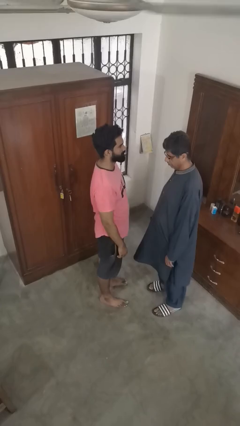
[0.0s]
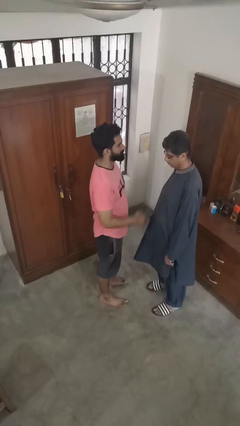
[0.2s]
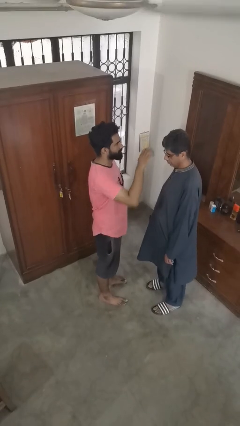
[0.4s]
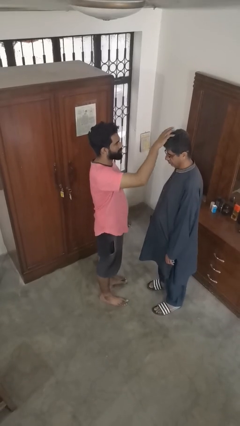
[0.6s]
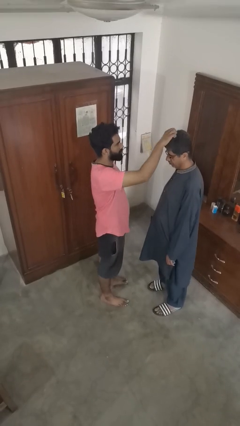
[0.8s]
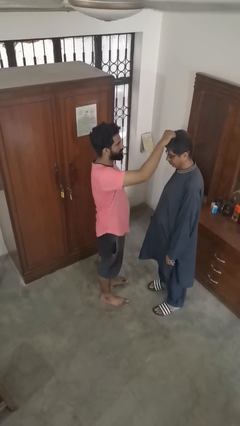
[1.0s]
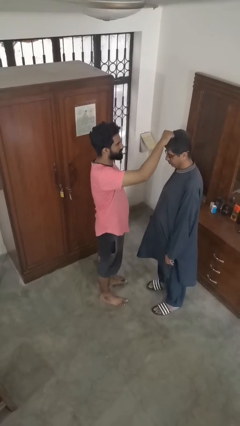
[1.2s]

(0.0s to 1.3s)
person grabs person by hair

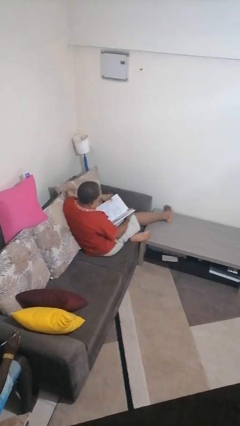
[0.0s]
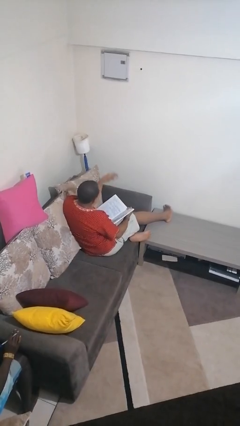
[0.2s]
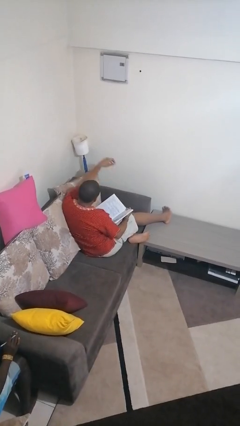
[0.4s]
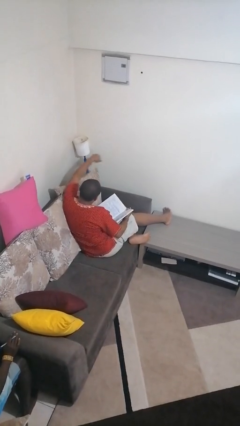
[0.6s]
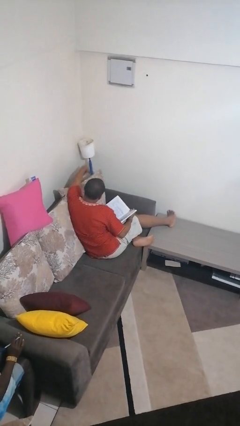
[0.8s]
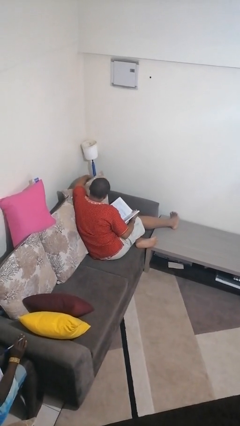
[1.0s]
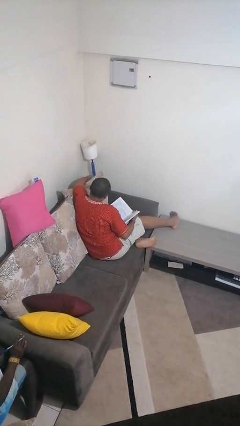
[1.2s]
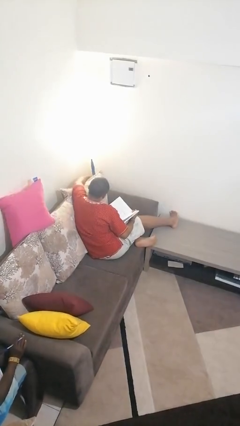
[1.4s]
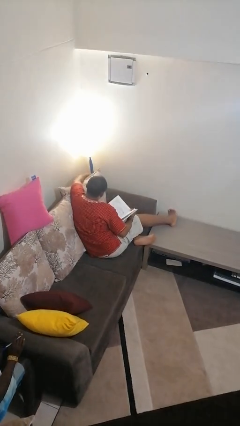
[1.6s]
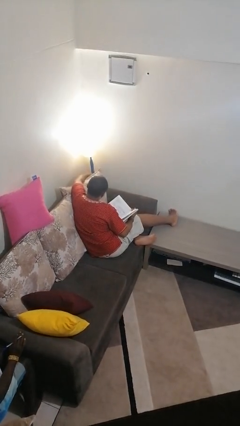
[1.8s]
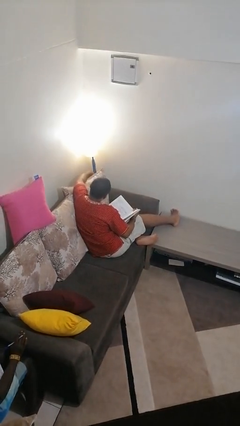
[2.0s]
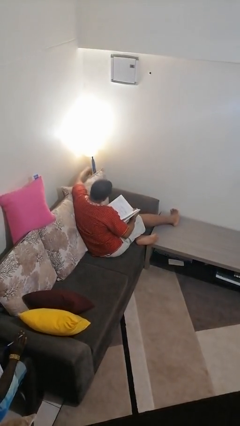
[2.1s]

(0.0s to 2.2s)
person turns on lamp

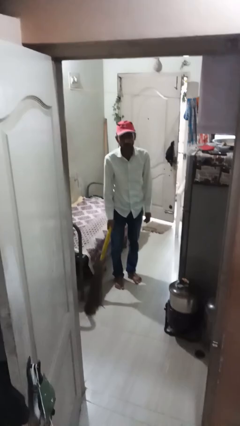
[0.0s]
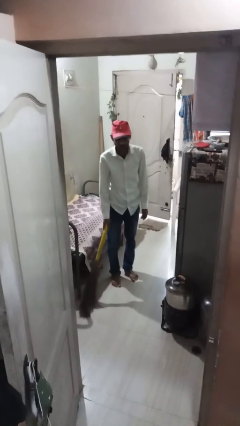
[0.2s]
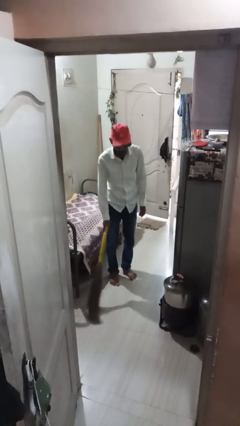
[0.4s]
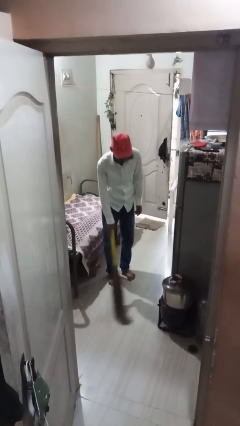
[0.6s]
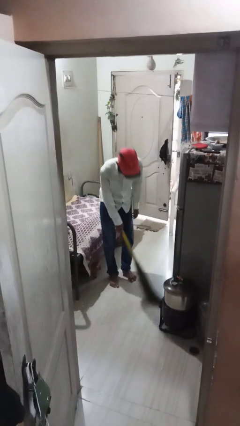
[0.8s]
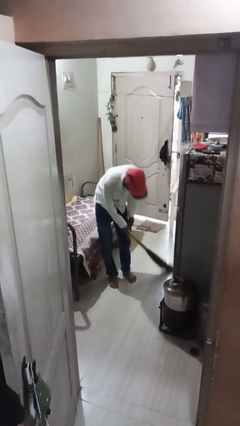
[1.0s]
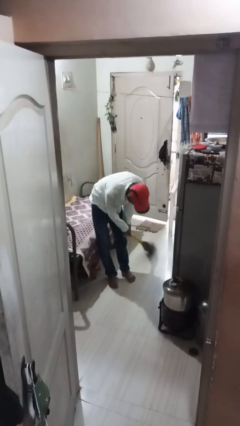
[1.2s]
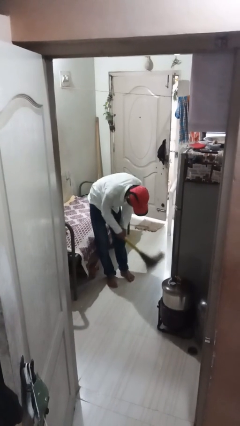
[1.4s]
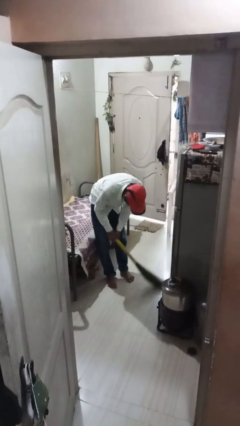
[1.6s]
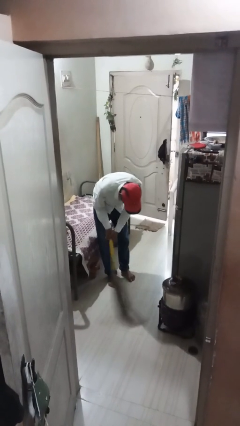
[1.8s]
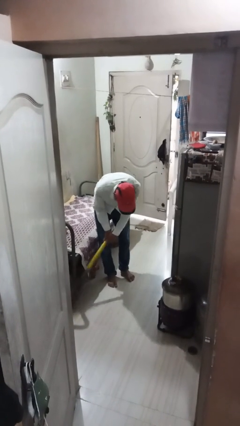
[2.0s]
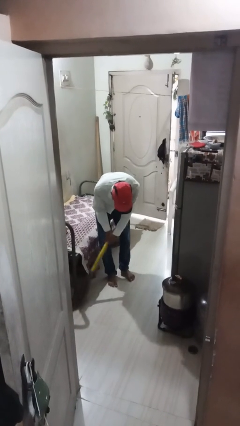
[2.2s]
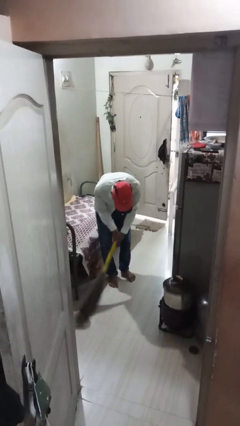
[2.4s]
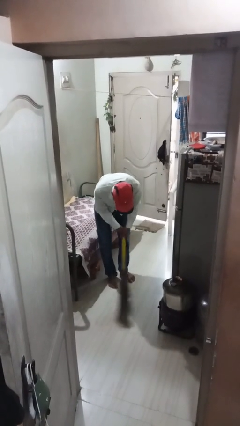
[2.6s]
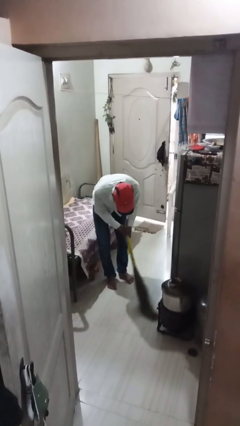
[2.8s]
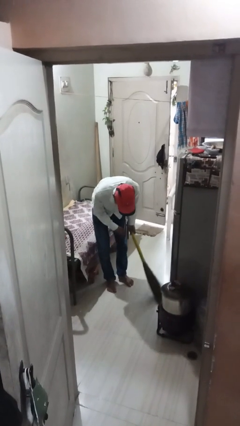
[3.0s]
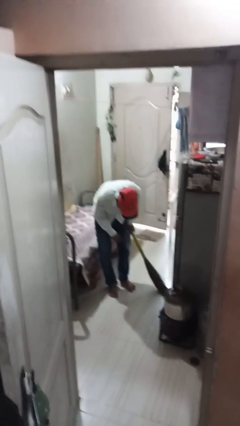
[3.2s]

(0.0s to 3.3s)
person sweeps floor

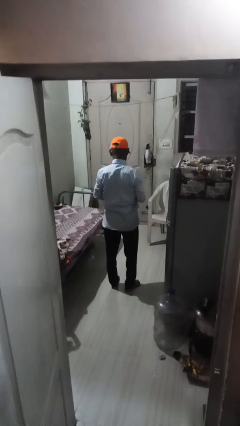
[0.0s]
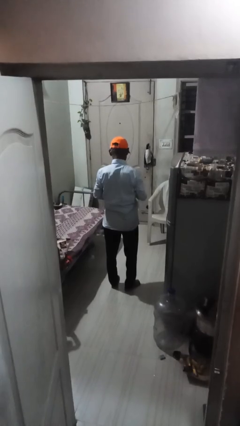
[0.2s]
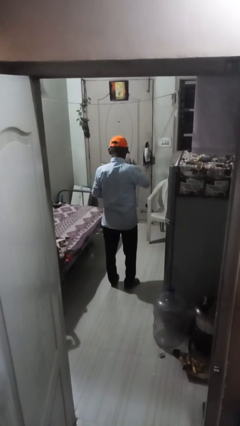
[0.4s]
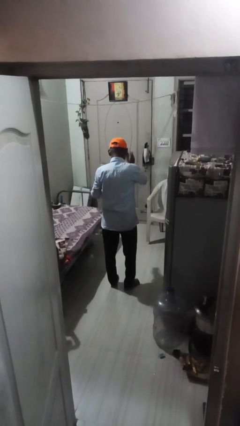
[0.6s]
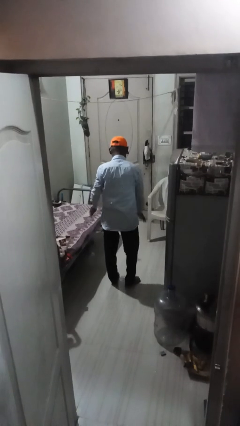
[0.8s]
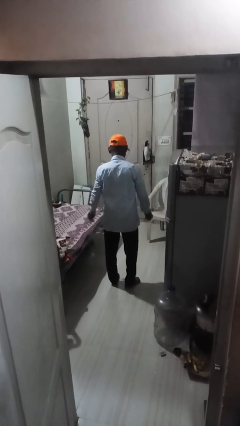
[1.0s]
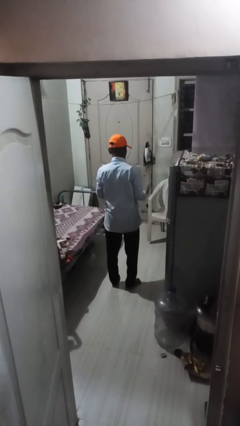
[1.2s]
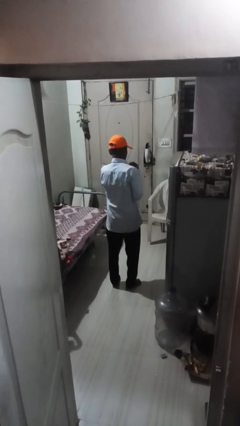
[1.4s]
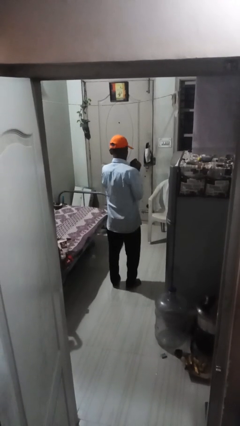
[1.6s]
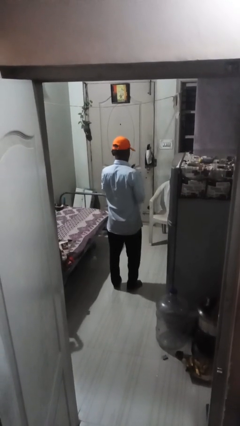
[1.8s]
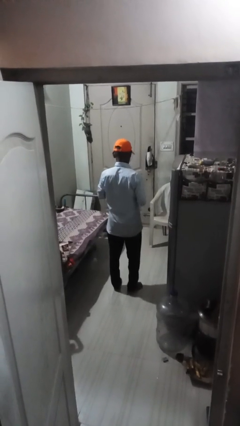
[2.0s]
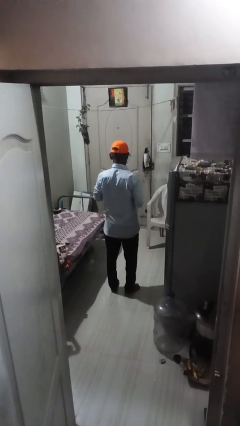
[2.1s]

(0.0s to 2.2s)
person bounces ball on floor

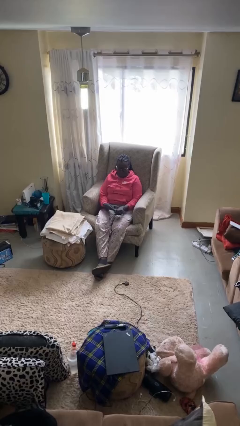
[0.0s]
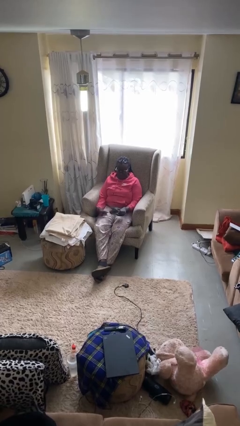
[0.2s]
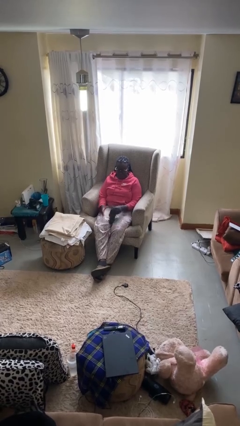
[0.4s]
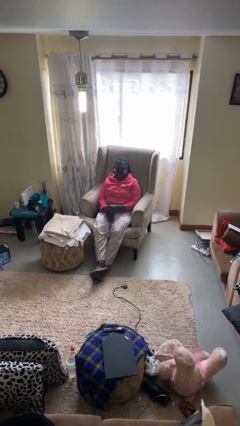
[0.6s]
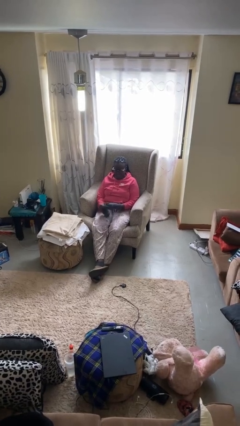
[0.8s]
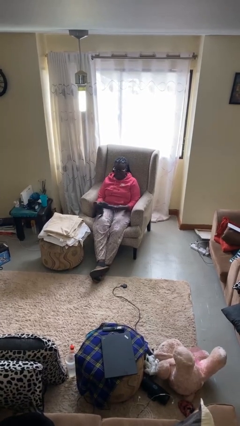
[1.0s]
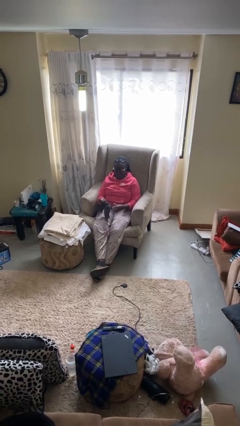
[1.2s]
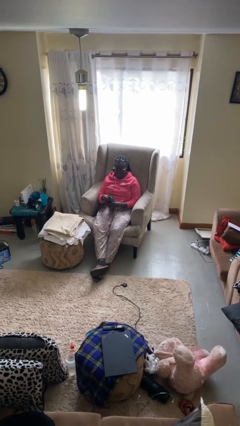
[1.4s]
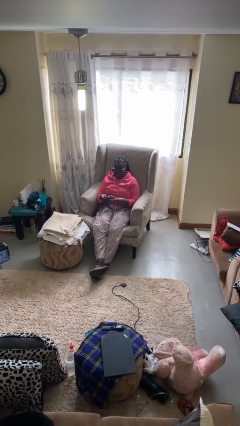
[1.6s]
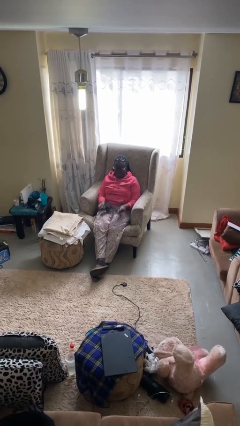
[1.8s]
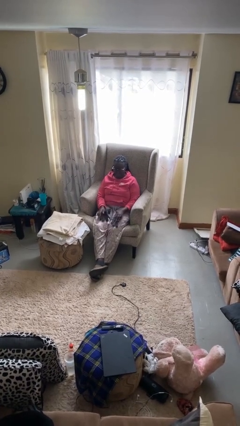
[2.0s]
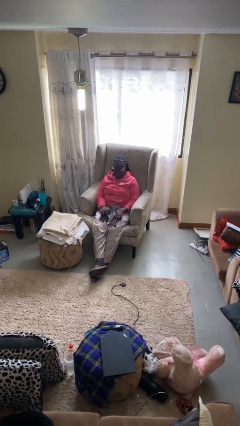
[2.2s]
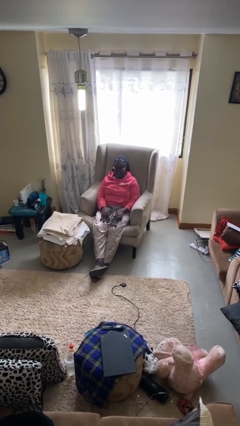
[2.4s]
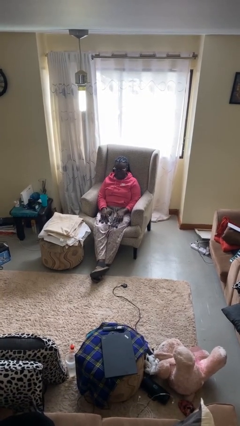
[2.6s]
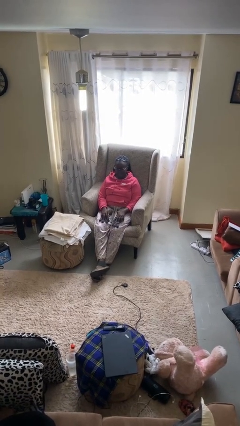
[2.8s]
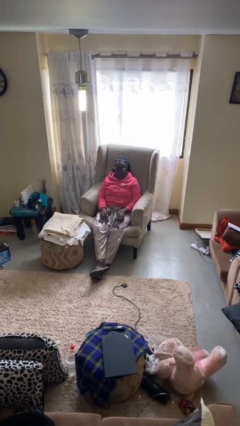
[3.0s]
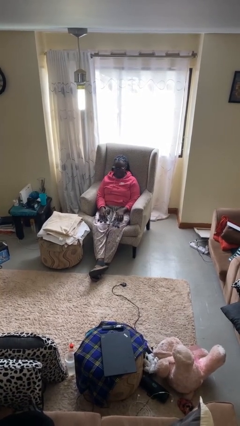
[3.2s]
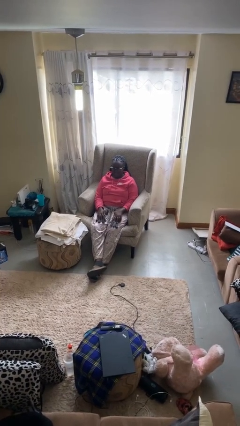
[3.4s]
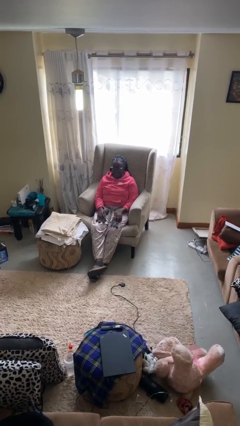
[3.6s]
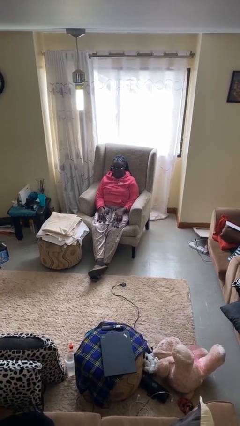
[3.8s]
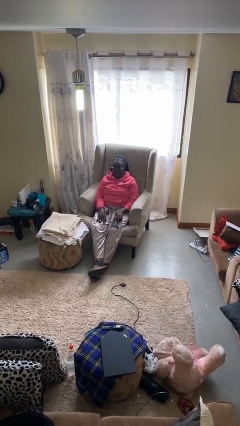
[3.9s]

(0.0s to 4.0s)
person takes off gloves

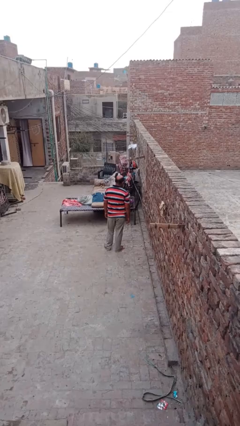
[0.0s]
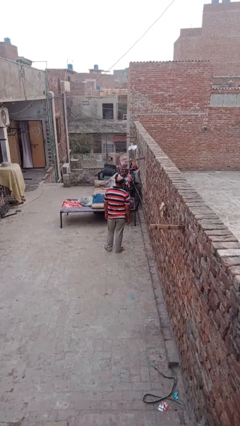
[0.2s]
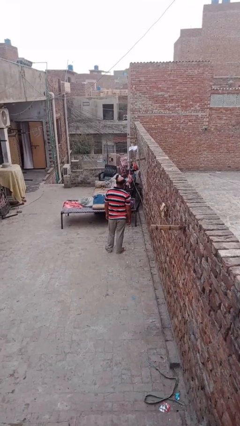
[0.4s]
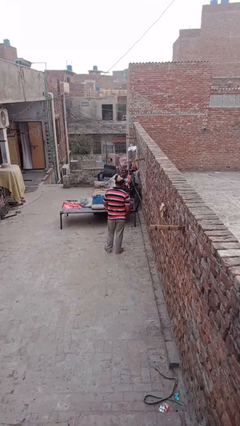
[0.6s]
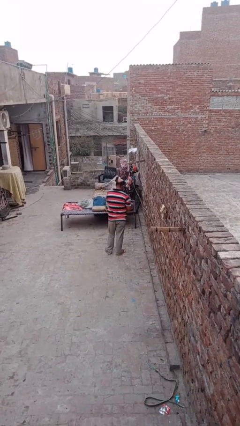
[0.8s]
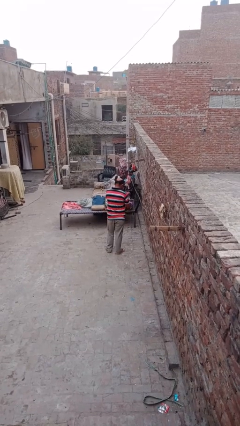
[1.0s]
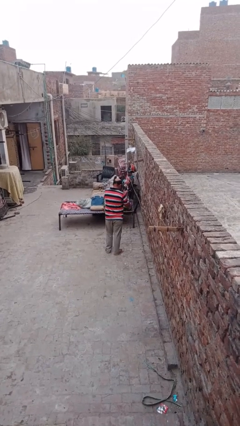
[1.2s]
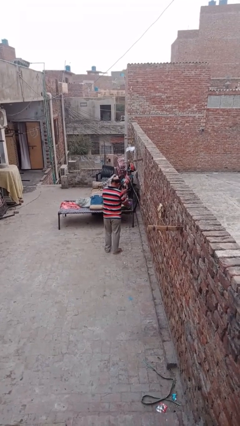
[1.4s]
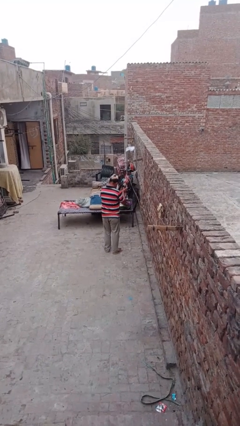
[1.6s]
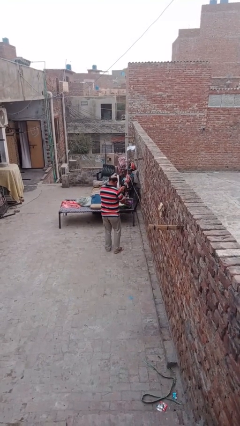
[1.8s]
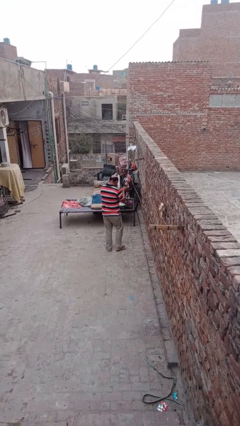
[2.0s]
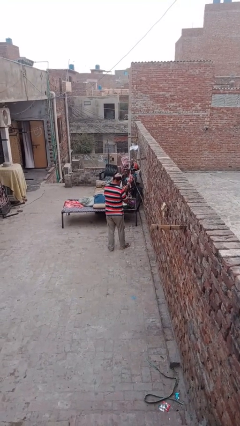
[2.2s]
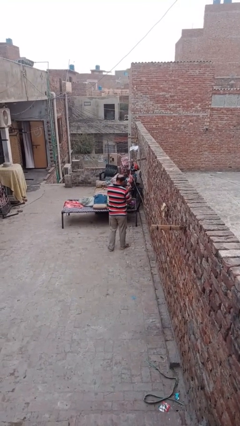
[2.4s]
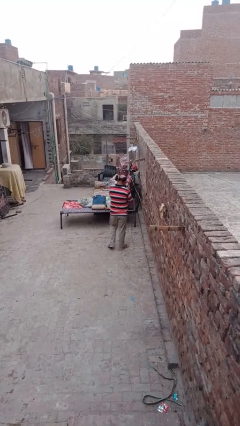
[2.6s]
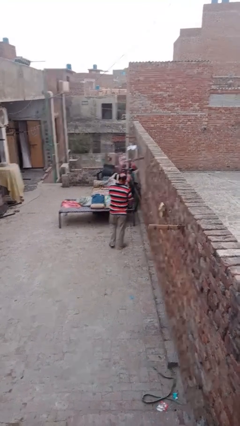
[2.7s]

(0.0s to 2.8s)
person blows into hands

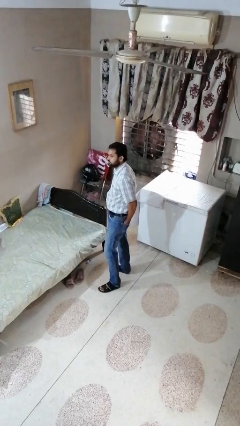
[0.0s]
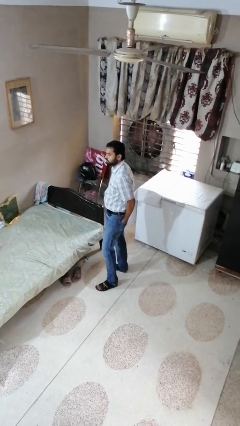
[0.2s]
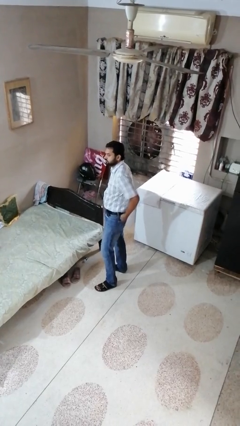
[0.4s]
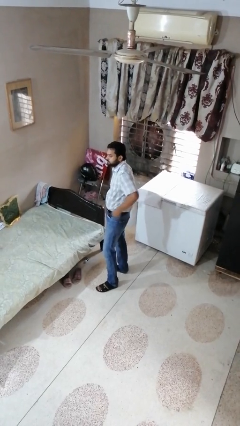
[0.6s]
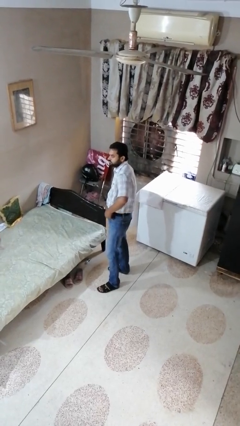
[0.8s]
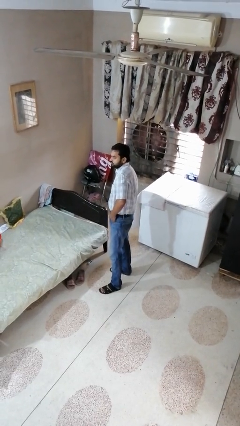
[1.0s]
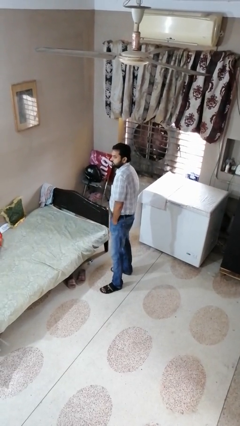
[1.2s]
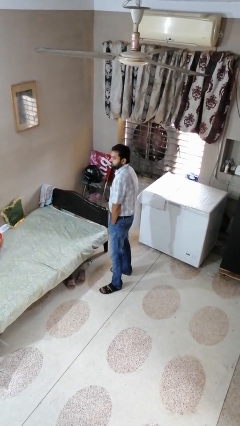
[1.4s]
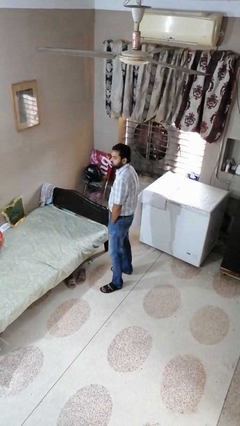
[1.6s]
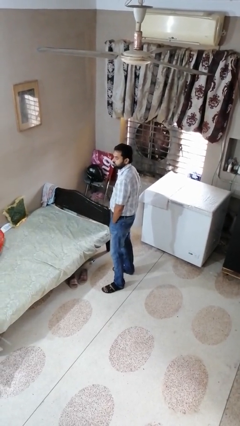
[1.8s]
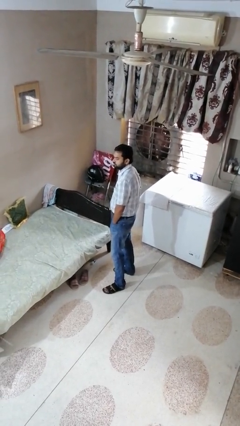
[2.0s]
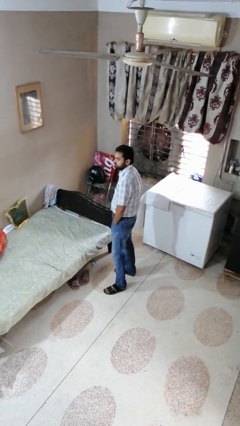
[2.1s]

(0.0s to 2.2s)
person puts hands in back pockets
